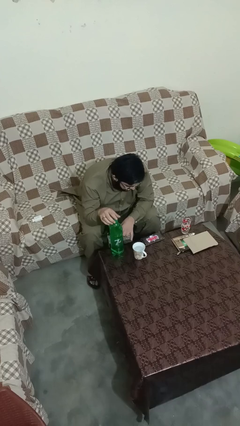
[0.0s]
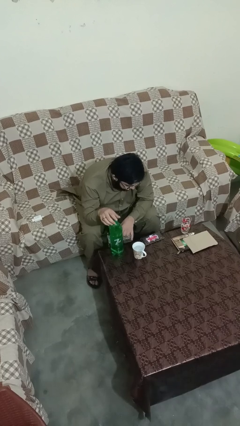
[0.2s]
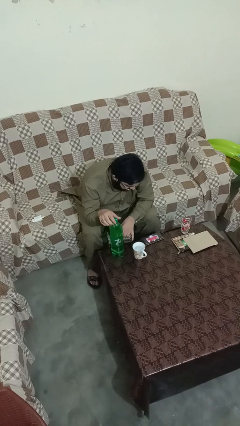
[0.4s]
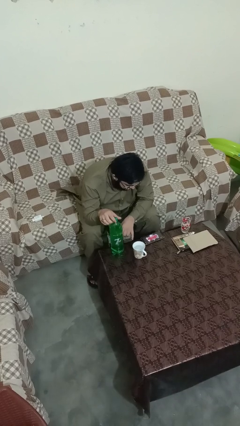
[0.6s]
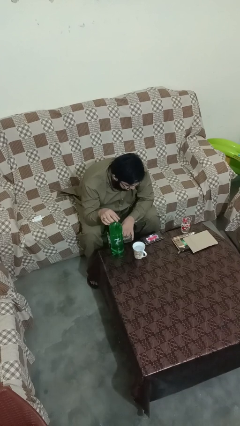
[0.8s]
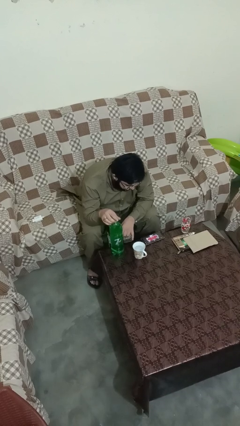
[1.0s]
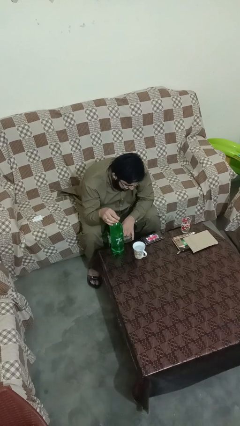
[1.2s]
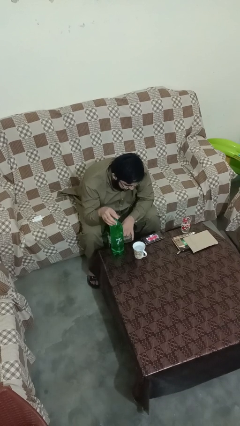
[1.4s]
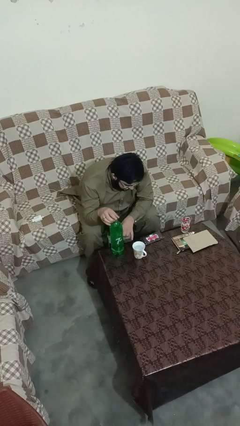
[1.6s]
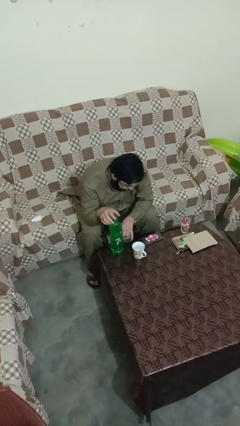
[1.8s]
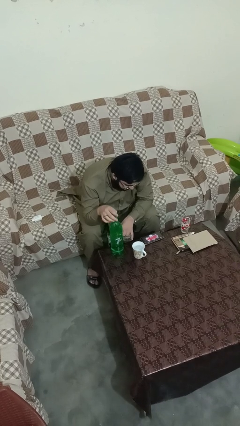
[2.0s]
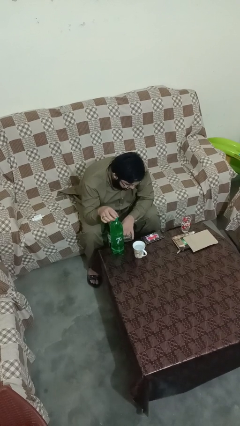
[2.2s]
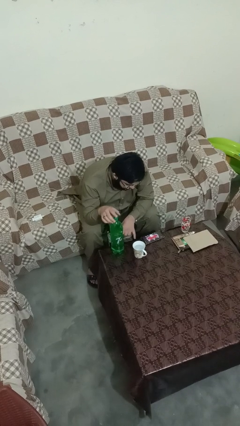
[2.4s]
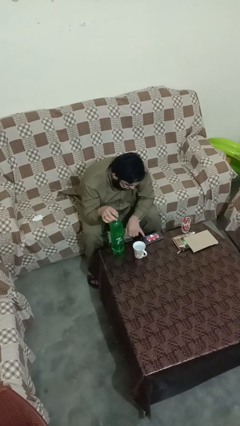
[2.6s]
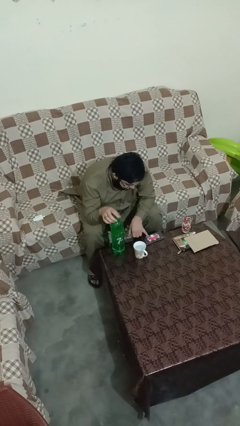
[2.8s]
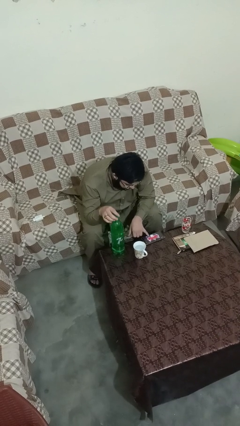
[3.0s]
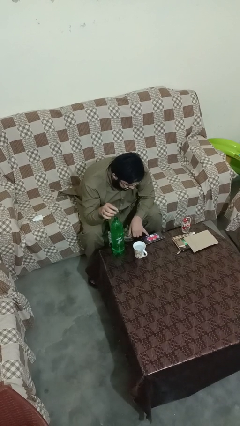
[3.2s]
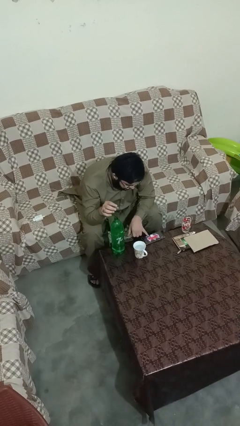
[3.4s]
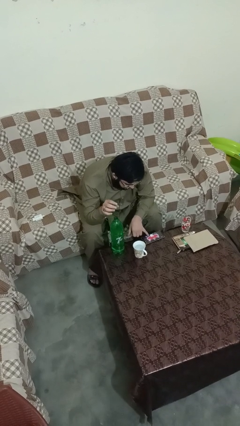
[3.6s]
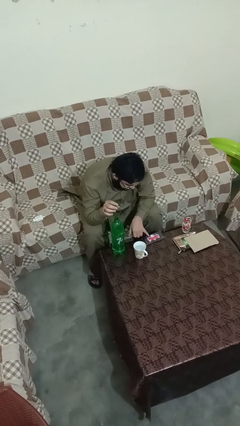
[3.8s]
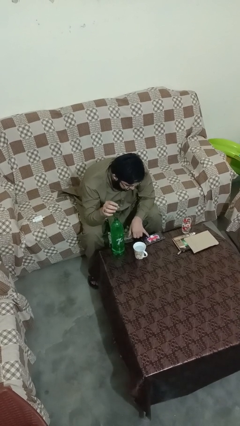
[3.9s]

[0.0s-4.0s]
person unscrews lid from bottle

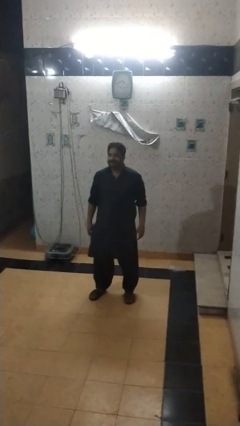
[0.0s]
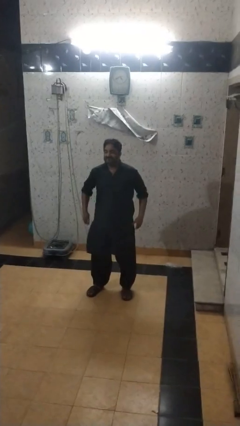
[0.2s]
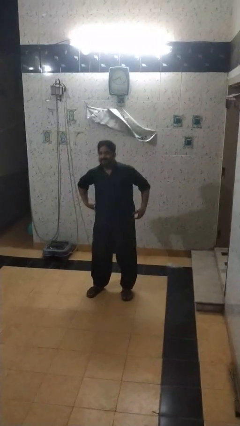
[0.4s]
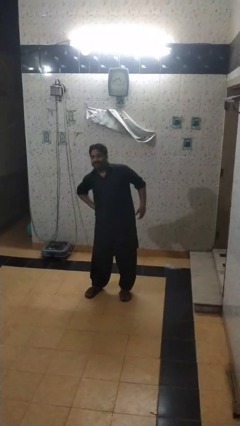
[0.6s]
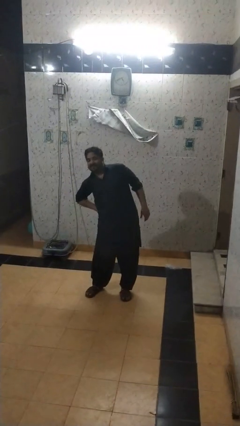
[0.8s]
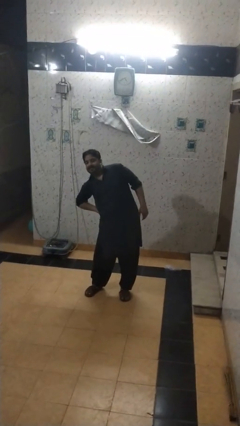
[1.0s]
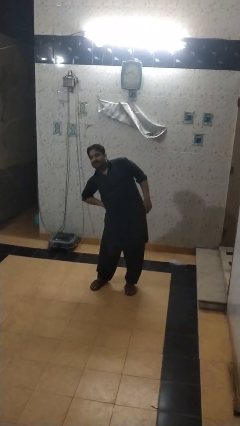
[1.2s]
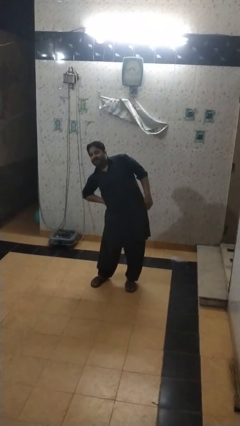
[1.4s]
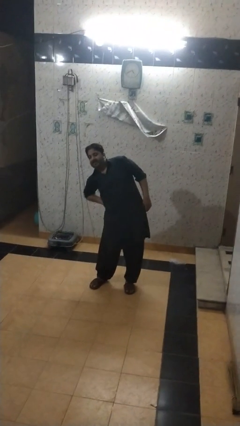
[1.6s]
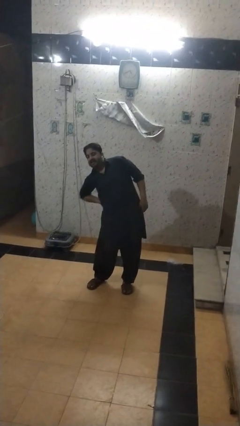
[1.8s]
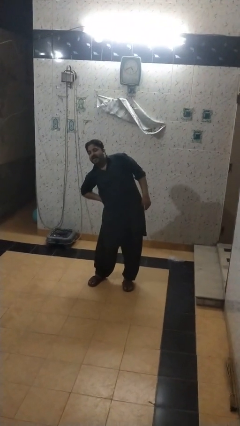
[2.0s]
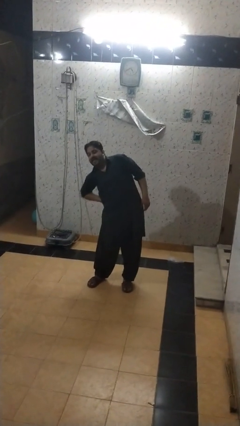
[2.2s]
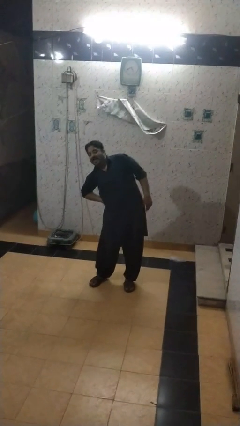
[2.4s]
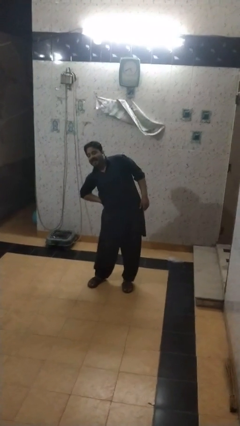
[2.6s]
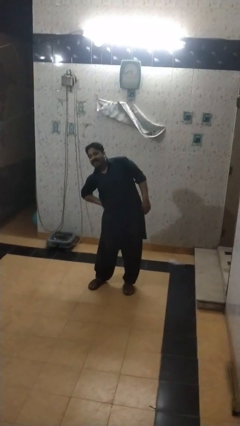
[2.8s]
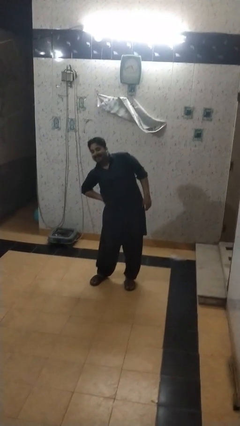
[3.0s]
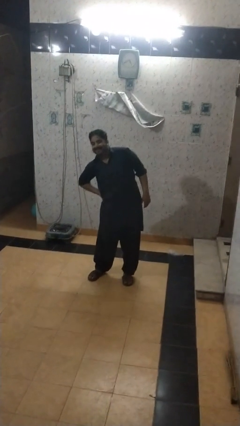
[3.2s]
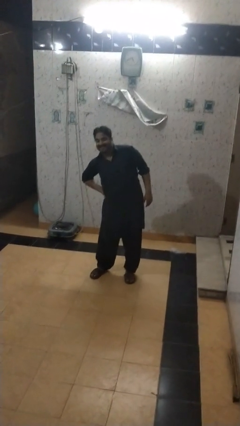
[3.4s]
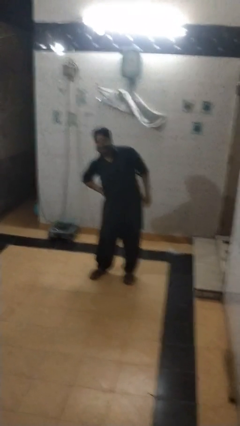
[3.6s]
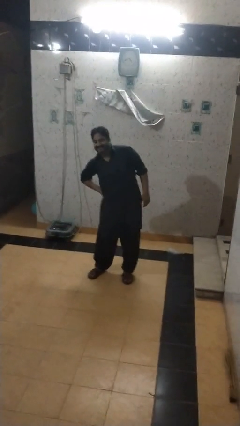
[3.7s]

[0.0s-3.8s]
person stretches arms to side

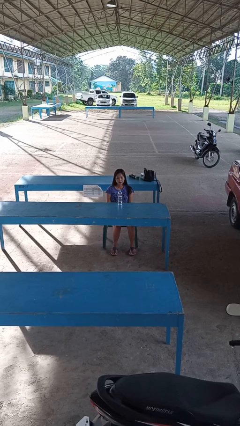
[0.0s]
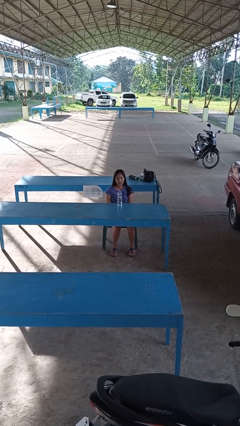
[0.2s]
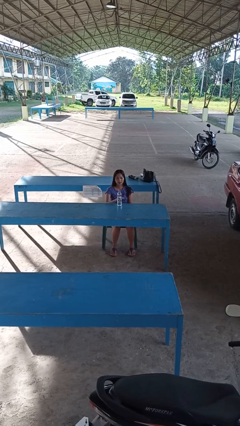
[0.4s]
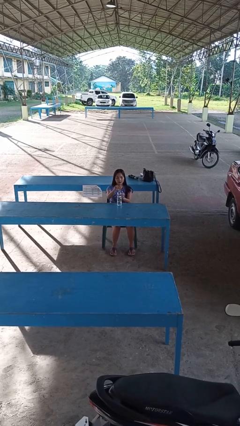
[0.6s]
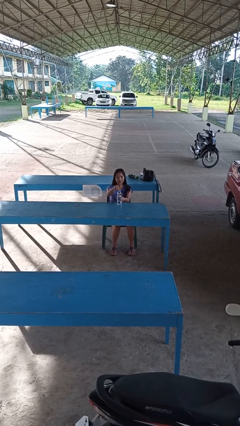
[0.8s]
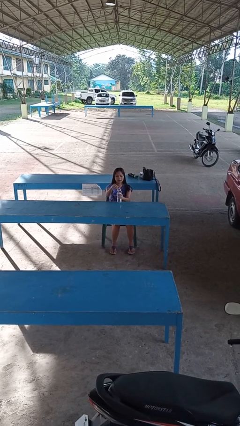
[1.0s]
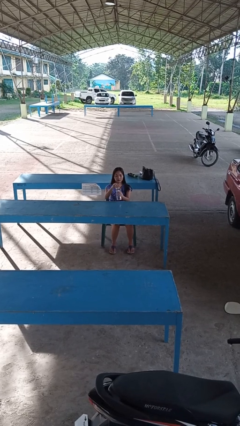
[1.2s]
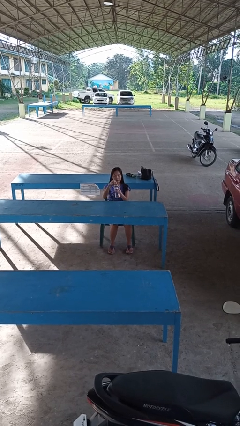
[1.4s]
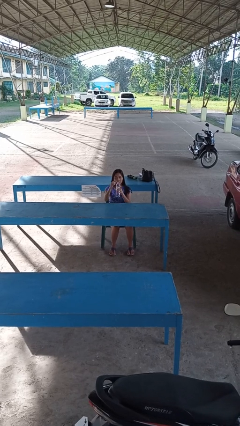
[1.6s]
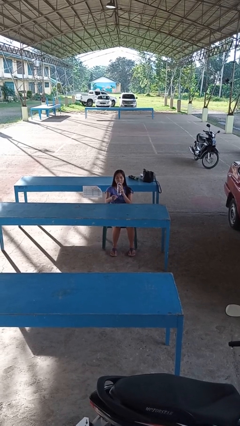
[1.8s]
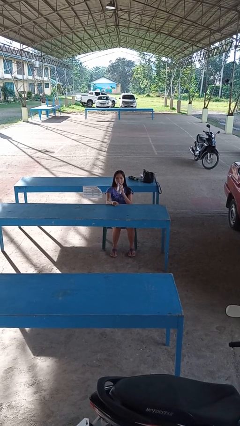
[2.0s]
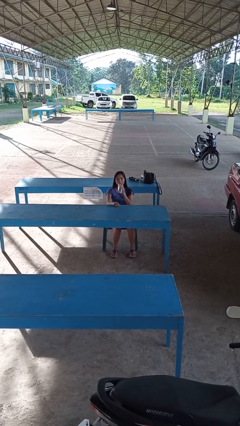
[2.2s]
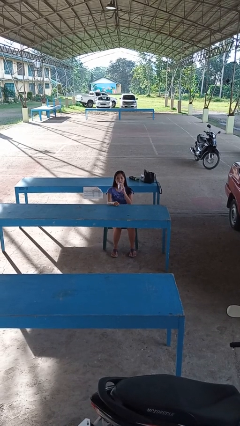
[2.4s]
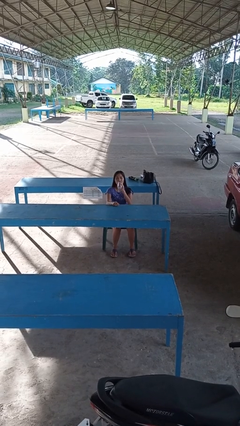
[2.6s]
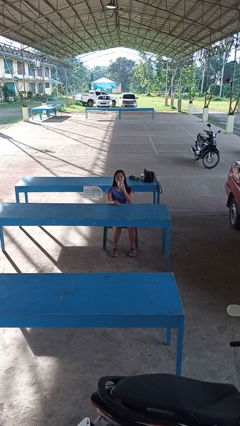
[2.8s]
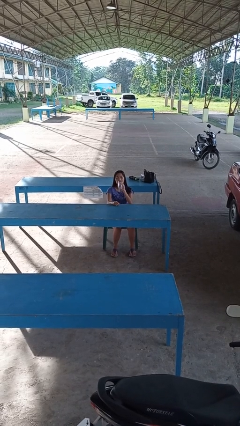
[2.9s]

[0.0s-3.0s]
person drinks from bottle

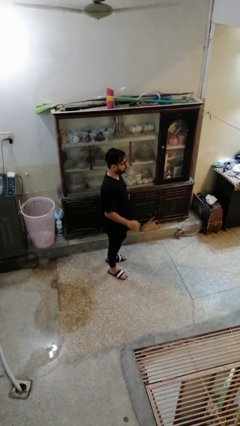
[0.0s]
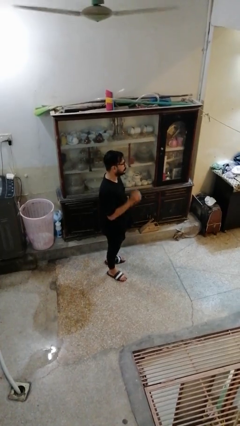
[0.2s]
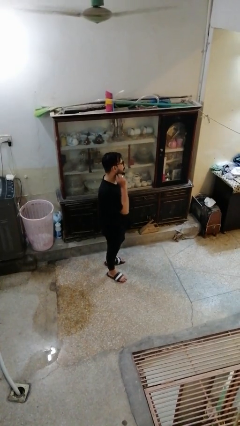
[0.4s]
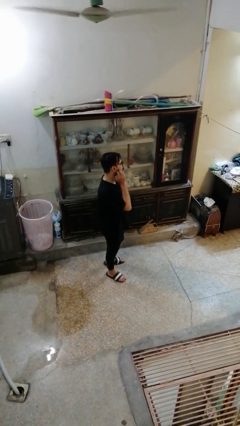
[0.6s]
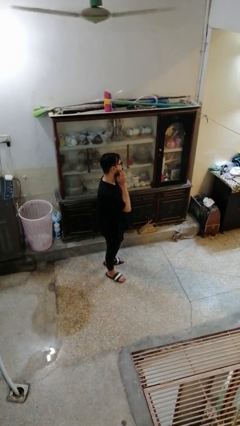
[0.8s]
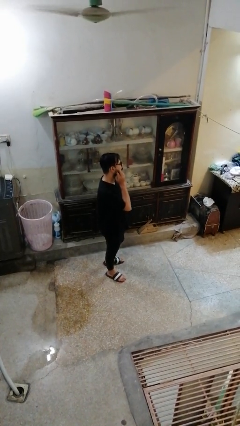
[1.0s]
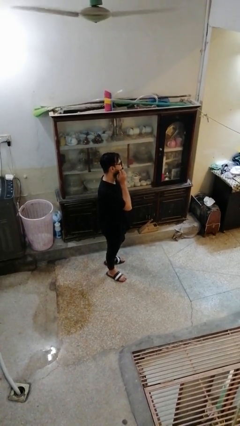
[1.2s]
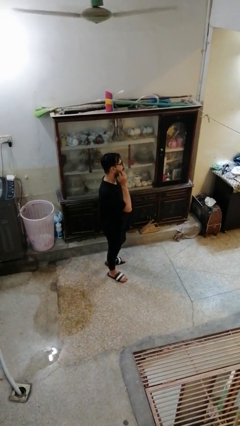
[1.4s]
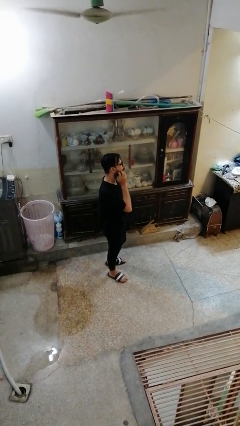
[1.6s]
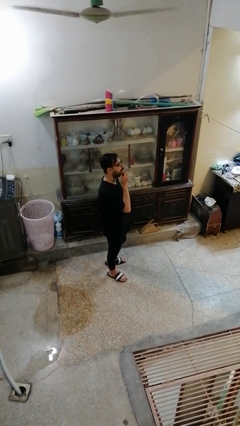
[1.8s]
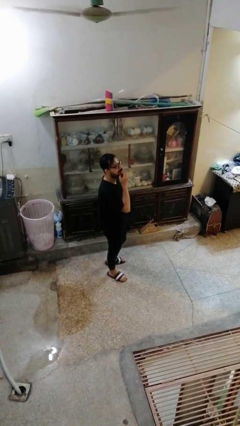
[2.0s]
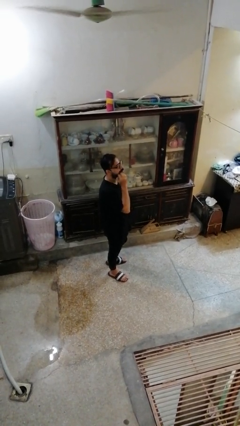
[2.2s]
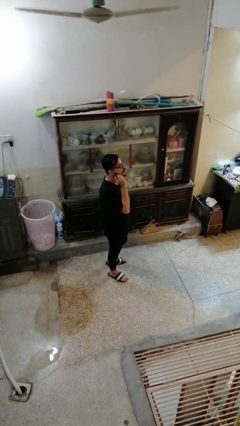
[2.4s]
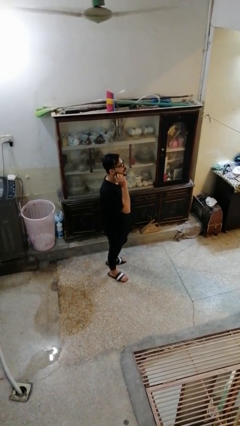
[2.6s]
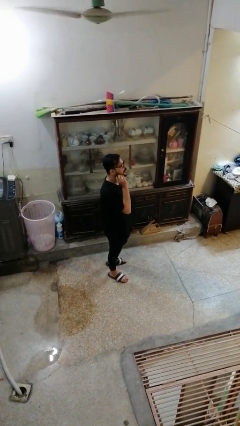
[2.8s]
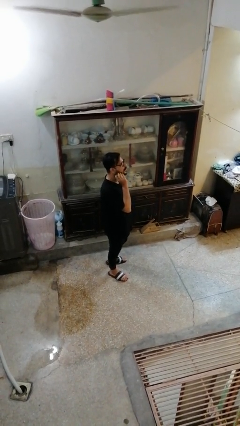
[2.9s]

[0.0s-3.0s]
person scratches face

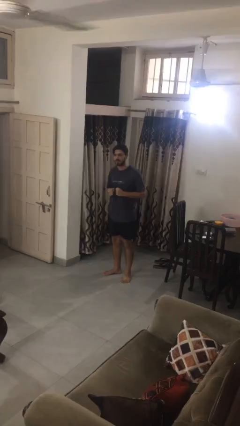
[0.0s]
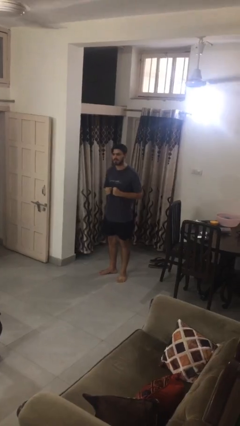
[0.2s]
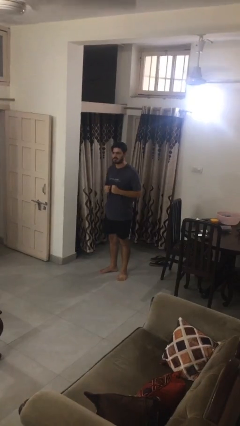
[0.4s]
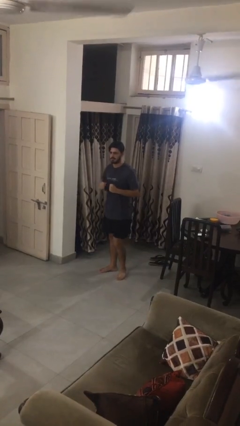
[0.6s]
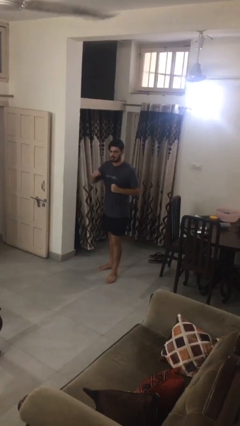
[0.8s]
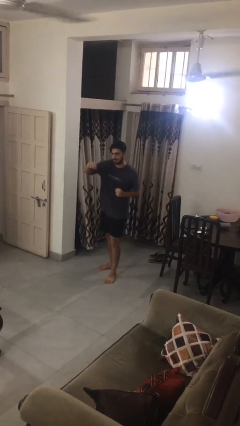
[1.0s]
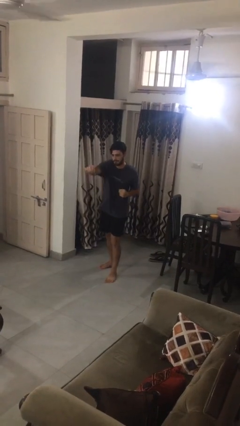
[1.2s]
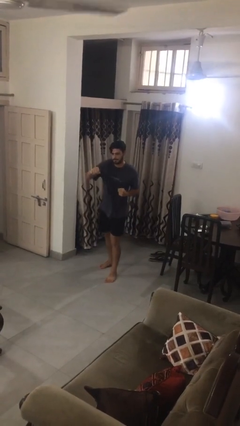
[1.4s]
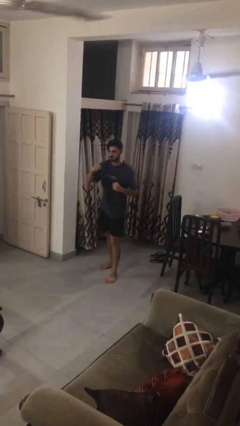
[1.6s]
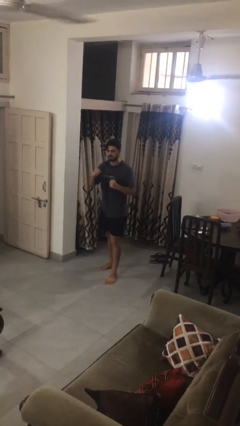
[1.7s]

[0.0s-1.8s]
person karate chop

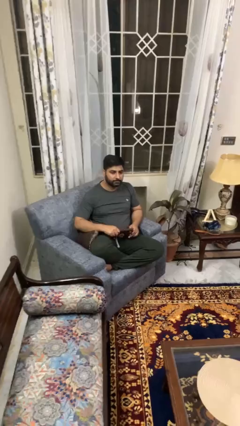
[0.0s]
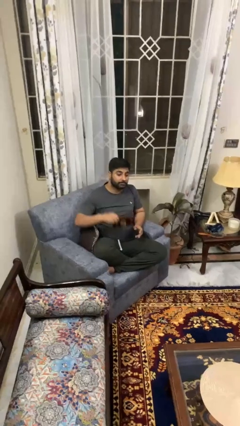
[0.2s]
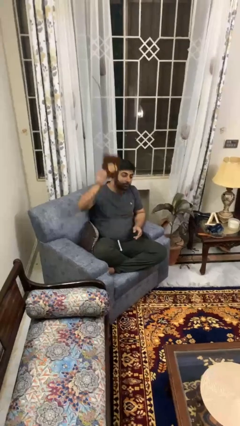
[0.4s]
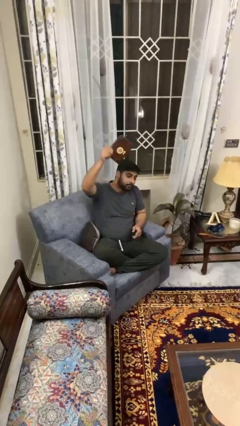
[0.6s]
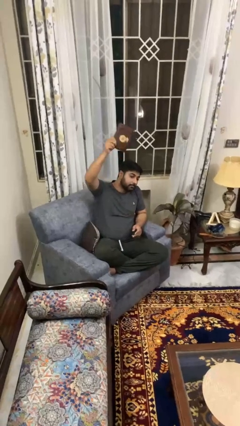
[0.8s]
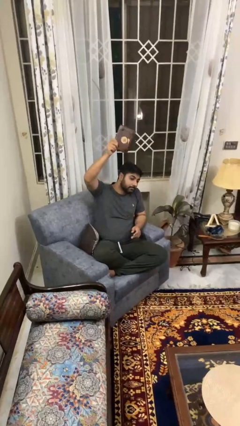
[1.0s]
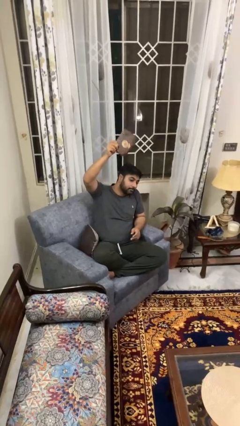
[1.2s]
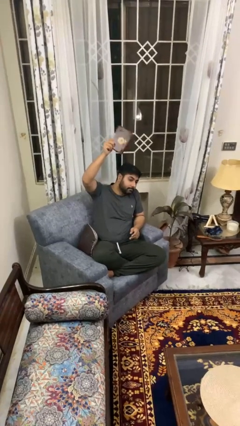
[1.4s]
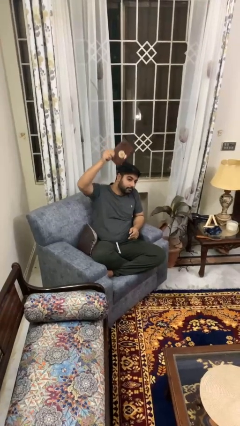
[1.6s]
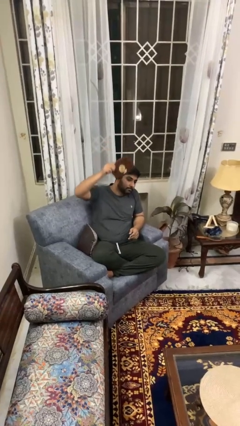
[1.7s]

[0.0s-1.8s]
person holds object above head
